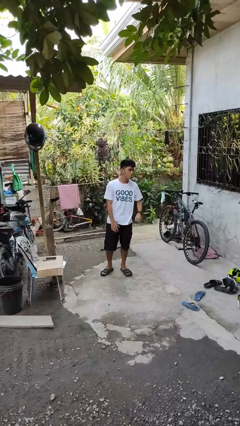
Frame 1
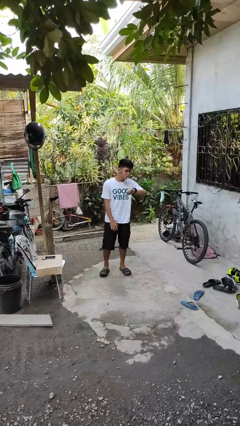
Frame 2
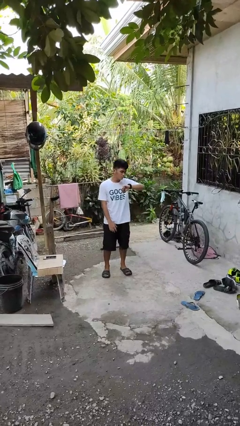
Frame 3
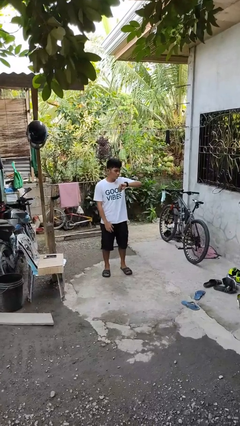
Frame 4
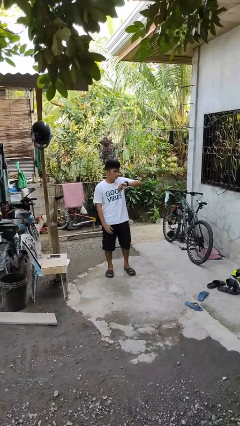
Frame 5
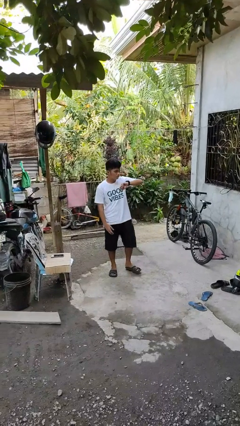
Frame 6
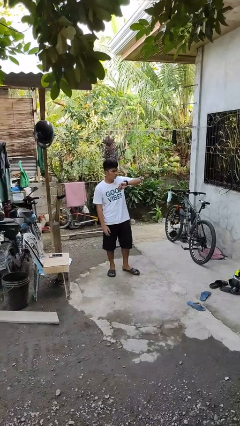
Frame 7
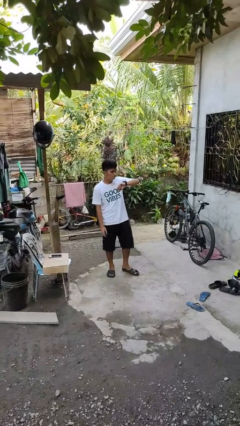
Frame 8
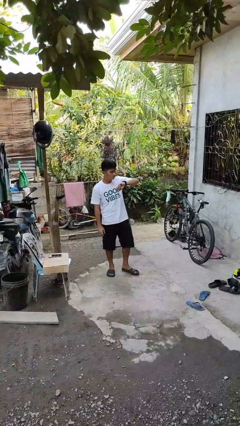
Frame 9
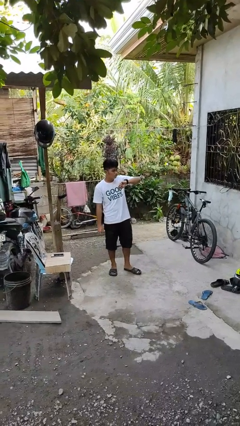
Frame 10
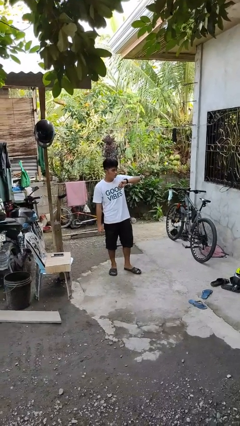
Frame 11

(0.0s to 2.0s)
person looks at wristwatch

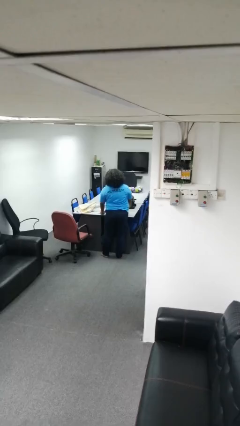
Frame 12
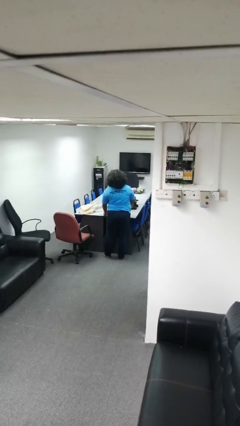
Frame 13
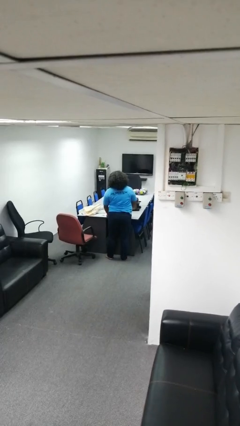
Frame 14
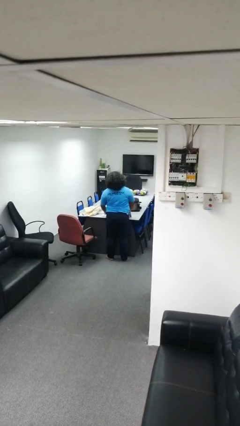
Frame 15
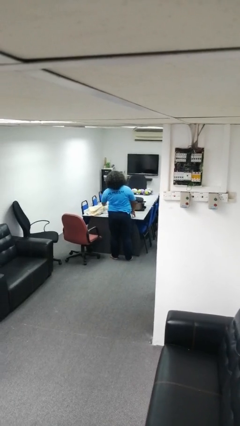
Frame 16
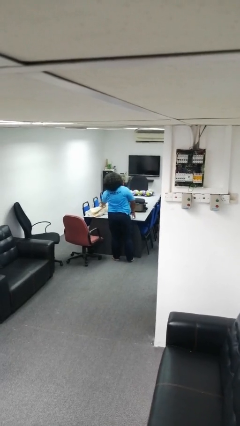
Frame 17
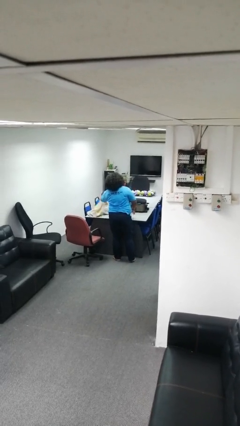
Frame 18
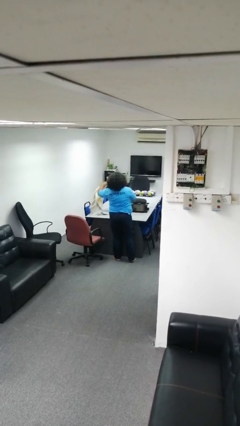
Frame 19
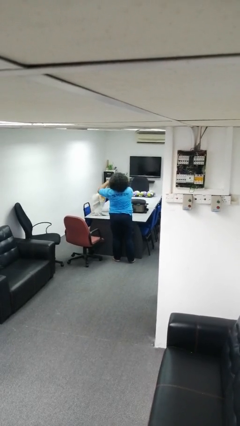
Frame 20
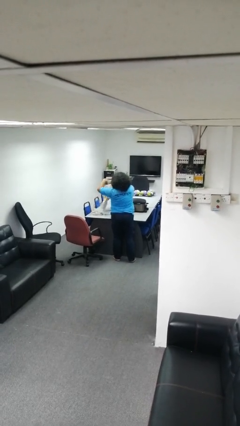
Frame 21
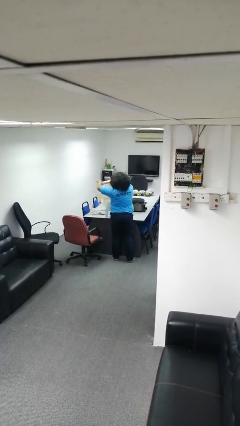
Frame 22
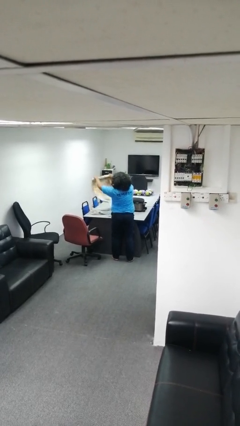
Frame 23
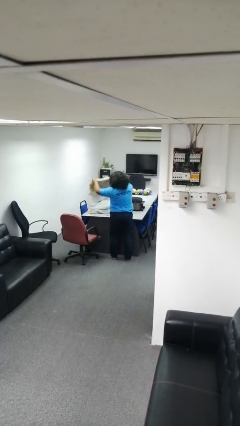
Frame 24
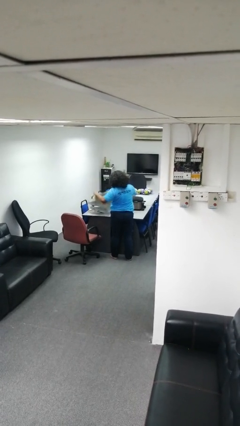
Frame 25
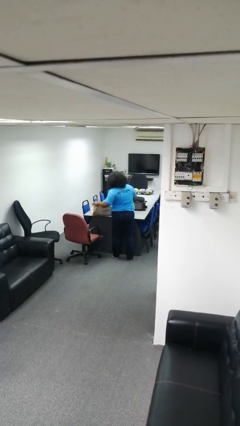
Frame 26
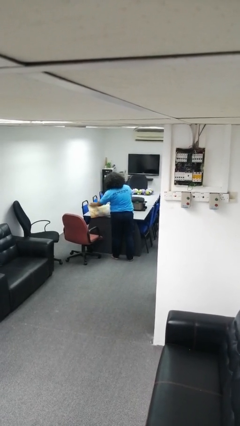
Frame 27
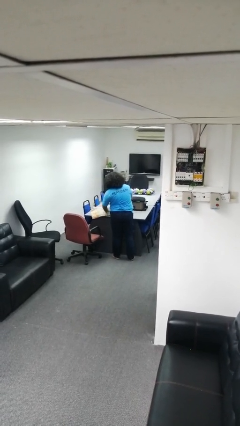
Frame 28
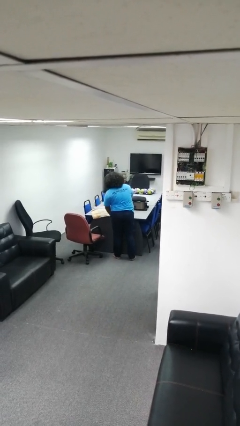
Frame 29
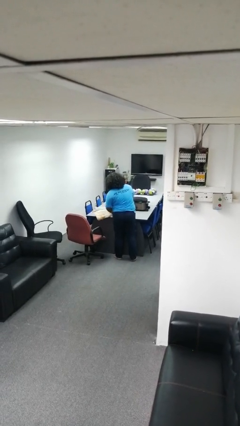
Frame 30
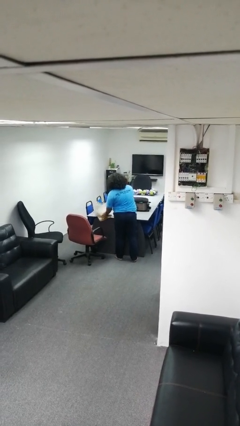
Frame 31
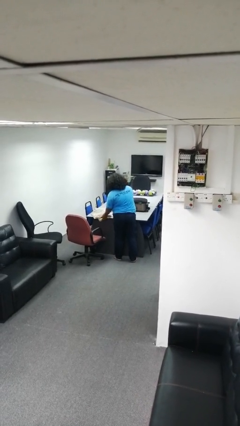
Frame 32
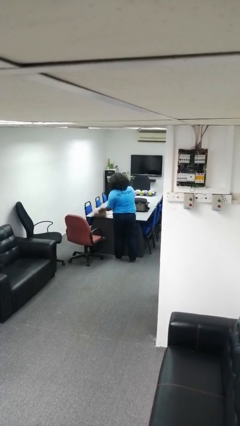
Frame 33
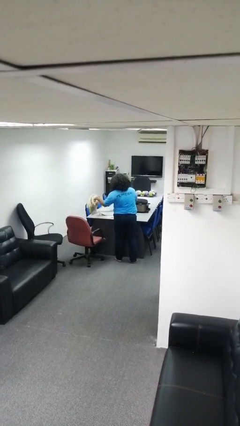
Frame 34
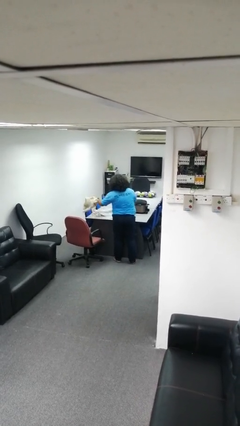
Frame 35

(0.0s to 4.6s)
person folds towel

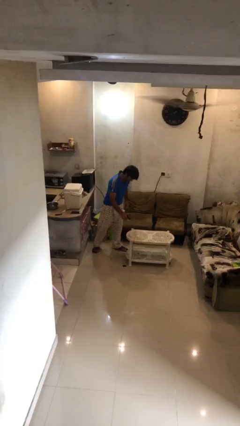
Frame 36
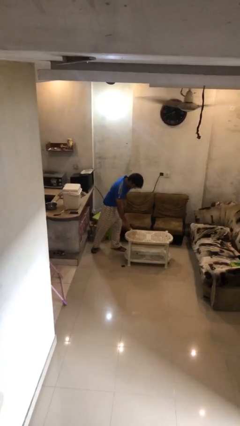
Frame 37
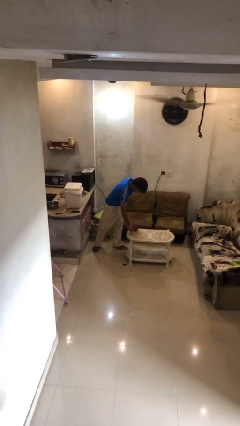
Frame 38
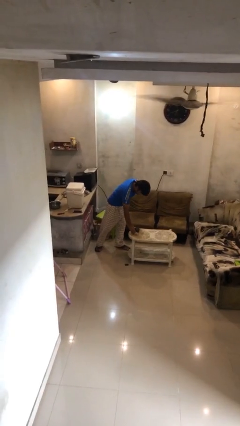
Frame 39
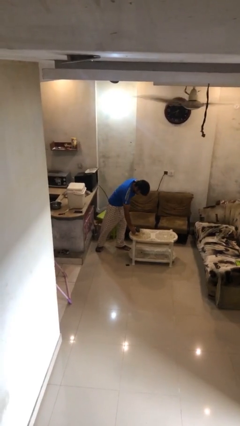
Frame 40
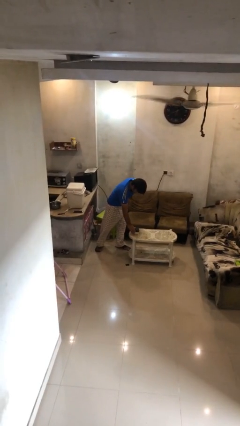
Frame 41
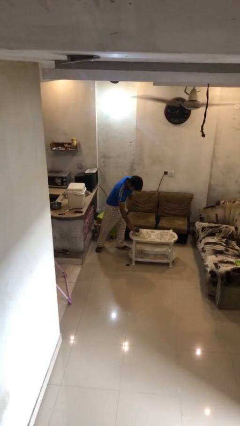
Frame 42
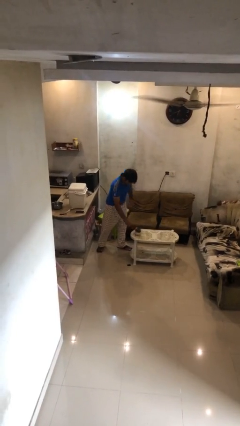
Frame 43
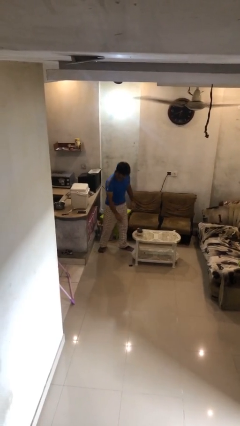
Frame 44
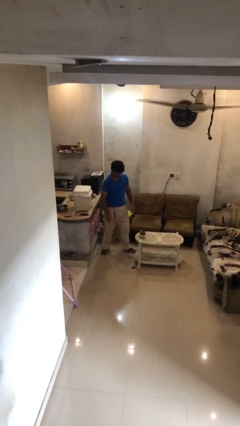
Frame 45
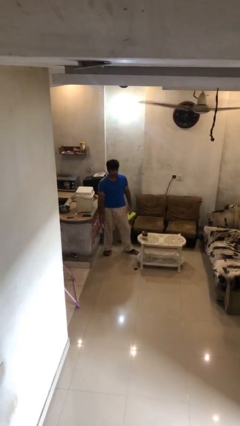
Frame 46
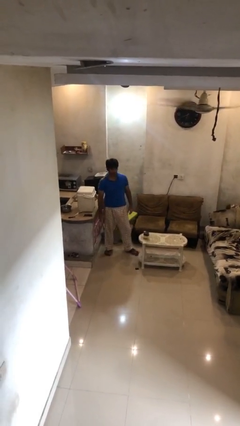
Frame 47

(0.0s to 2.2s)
person puts down object on table

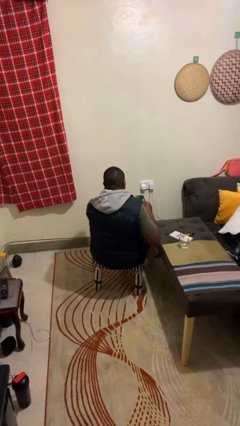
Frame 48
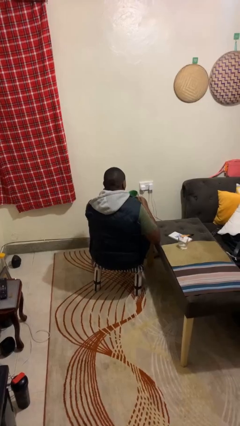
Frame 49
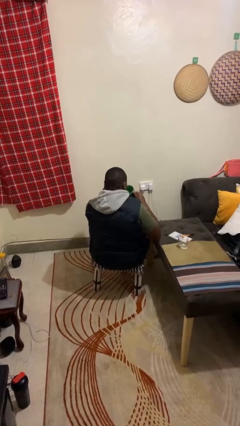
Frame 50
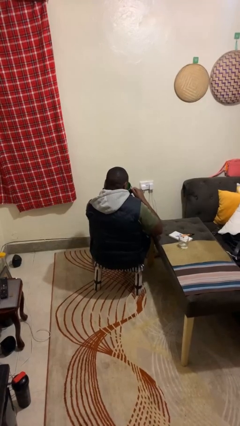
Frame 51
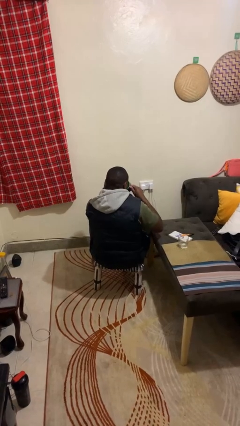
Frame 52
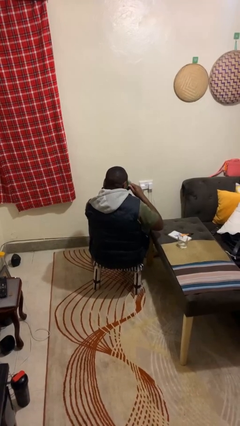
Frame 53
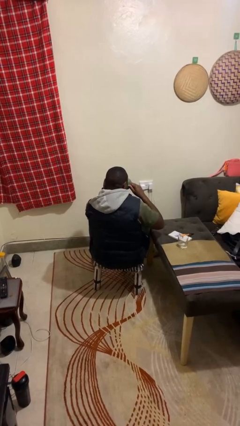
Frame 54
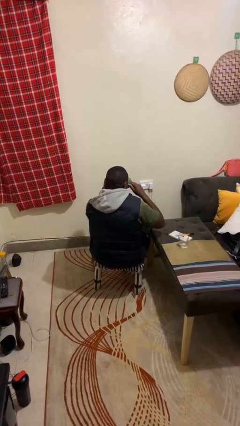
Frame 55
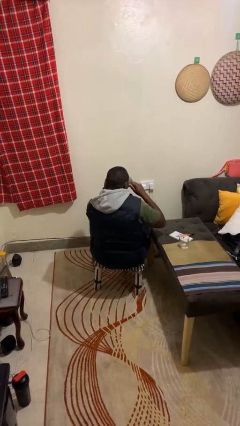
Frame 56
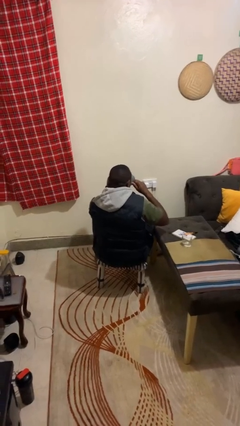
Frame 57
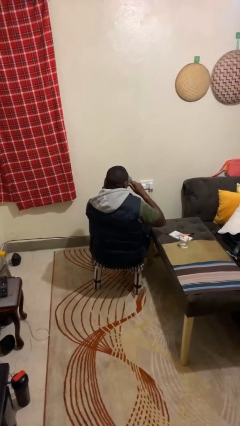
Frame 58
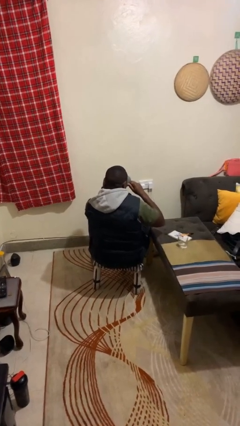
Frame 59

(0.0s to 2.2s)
person drinks from mug

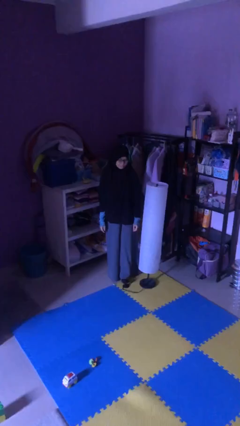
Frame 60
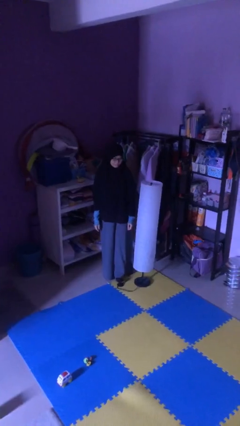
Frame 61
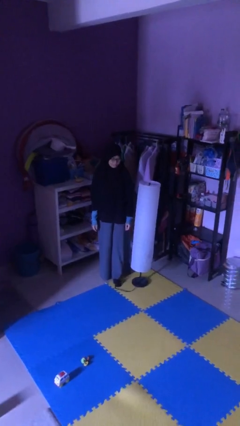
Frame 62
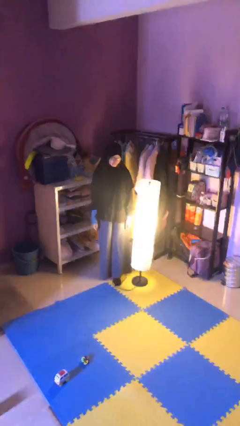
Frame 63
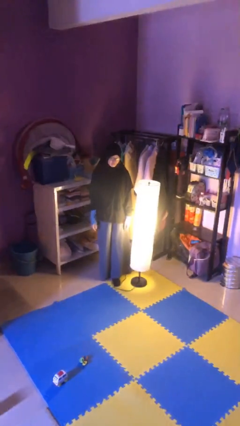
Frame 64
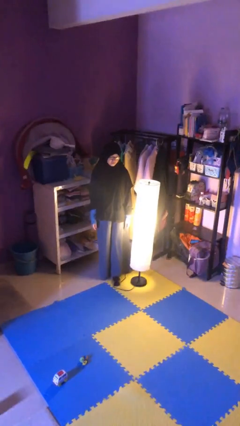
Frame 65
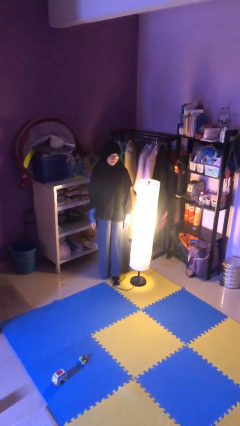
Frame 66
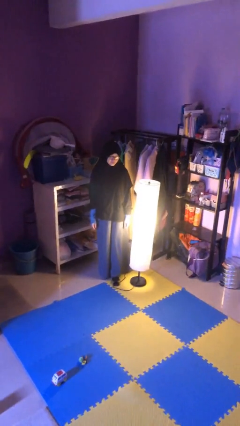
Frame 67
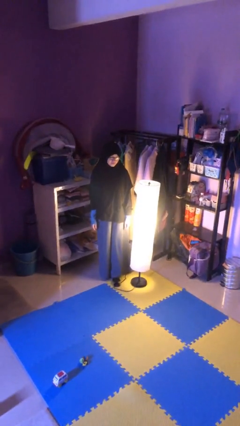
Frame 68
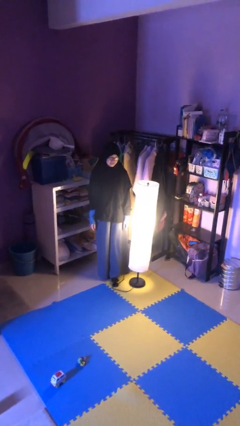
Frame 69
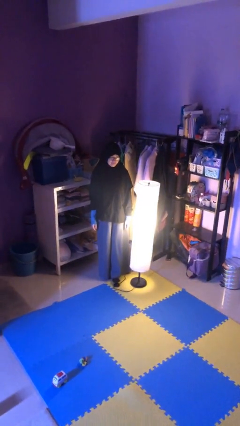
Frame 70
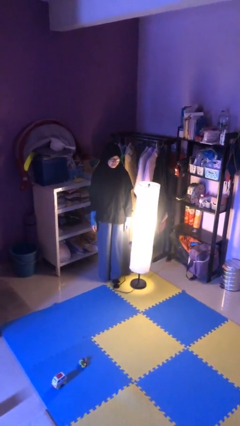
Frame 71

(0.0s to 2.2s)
person turns on lamp

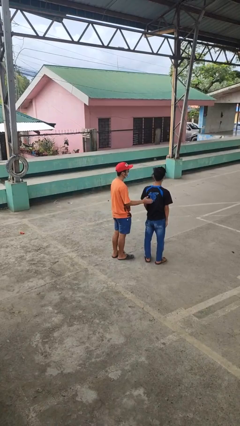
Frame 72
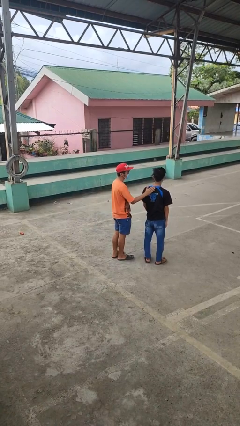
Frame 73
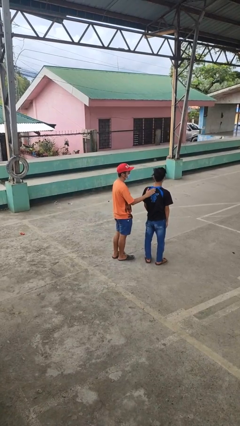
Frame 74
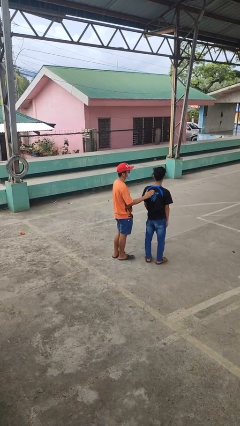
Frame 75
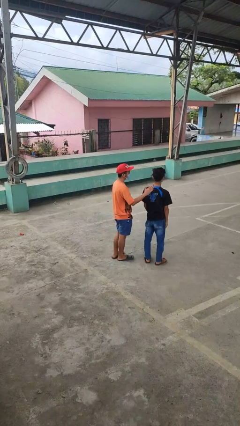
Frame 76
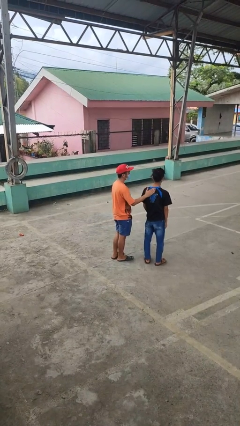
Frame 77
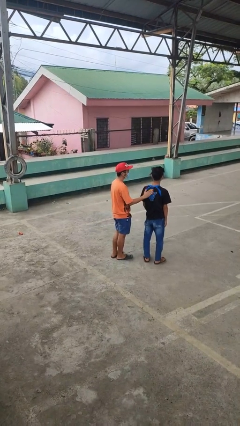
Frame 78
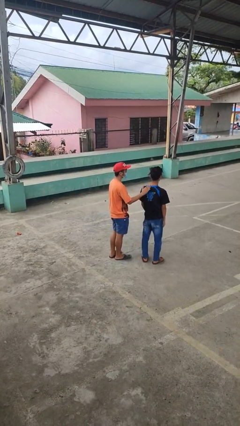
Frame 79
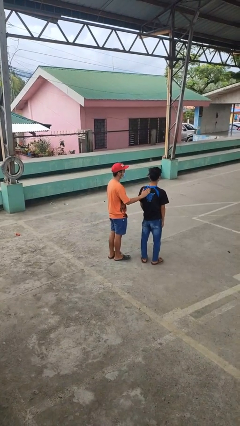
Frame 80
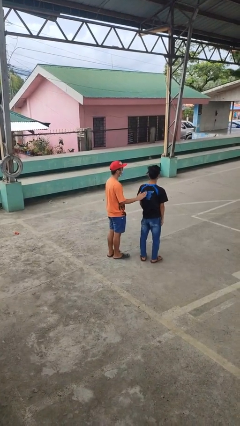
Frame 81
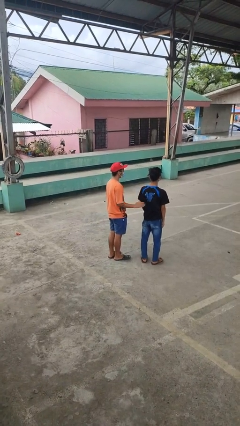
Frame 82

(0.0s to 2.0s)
person touches back of person

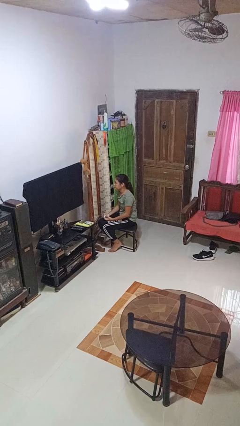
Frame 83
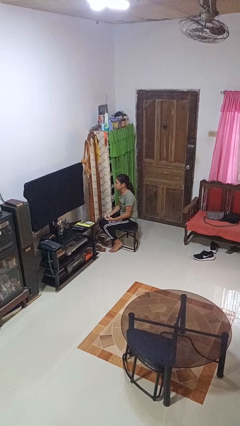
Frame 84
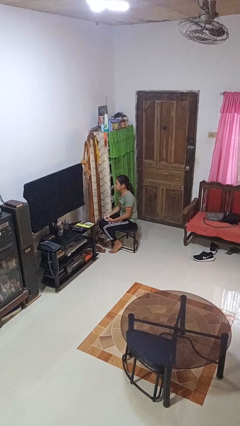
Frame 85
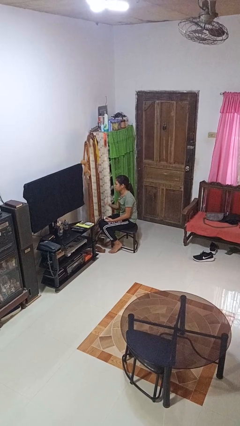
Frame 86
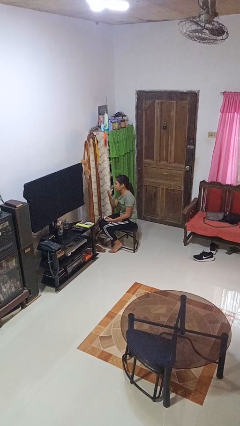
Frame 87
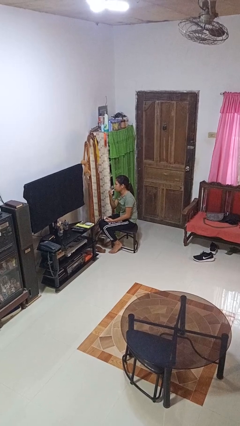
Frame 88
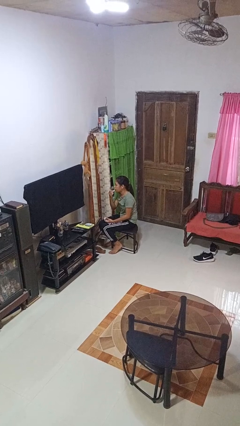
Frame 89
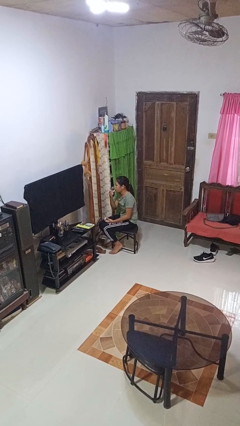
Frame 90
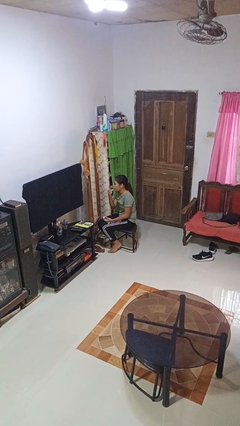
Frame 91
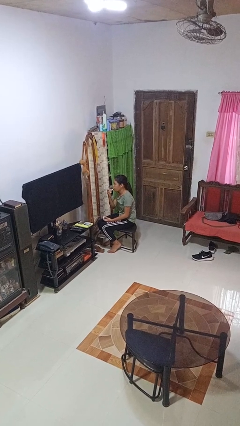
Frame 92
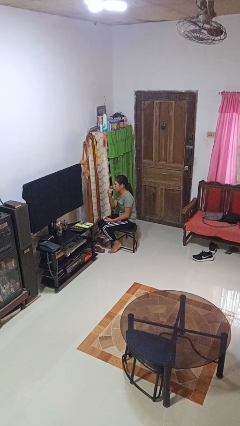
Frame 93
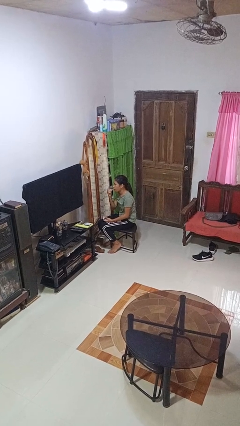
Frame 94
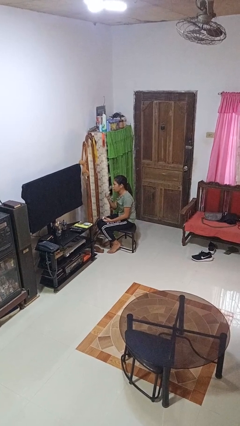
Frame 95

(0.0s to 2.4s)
person applies lip makeup
